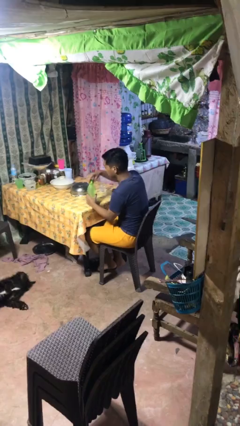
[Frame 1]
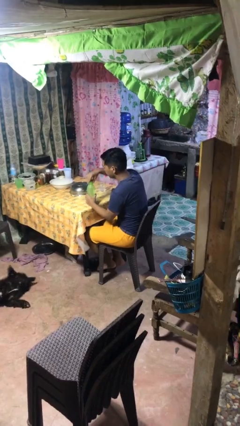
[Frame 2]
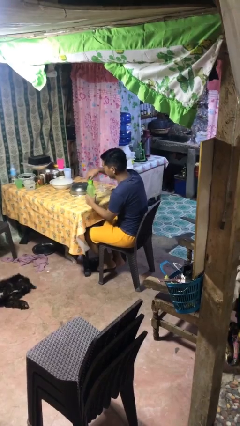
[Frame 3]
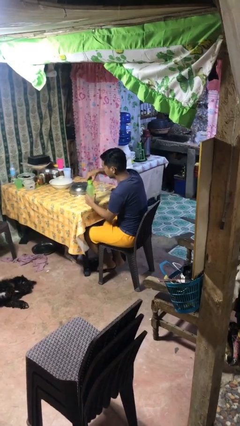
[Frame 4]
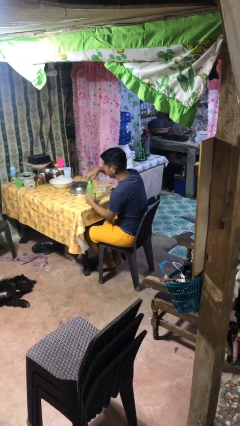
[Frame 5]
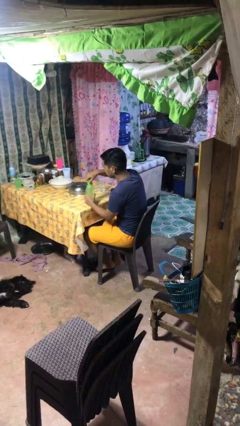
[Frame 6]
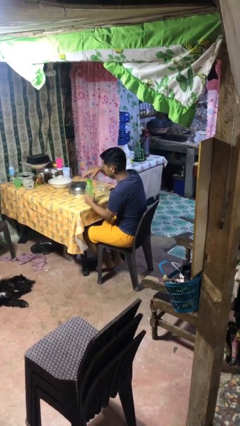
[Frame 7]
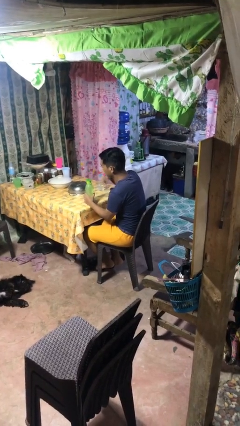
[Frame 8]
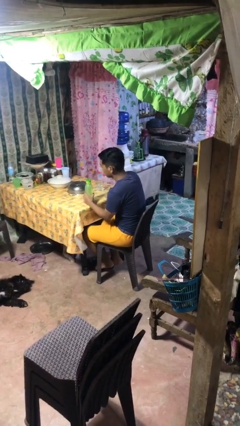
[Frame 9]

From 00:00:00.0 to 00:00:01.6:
person screws lid to bottle

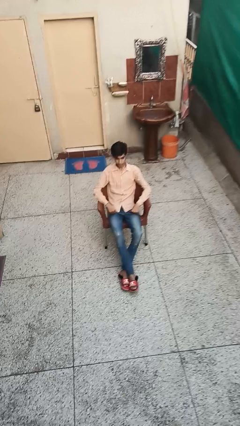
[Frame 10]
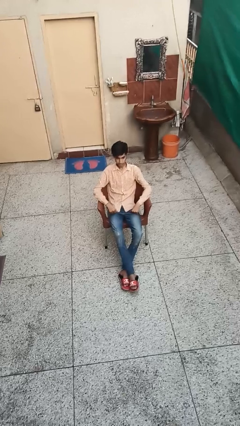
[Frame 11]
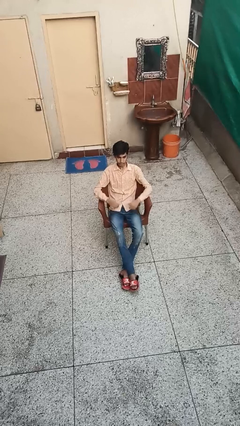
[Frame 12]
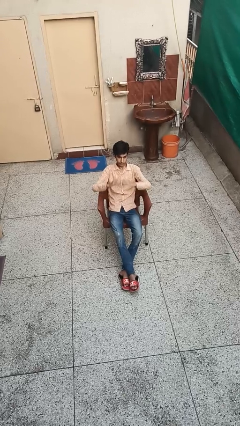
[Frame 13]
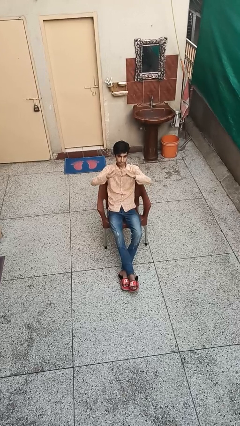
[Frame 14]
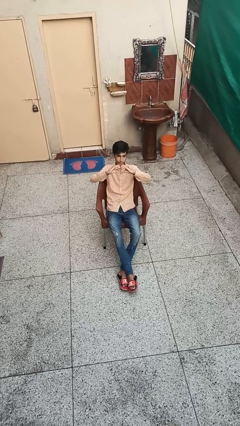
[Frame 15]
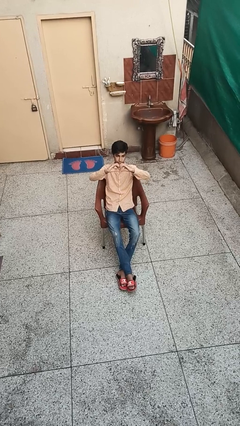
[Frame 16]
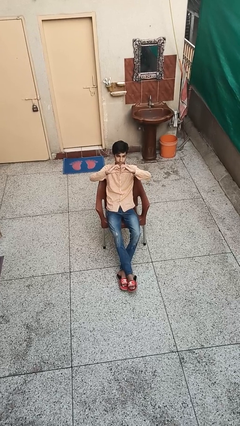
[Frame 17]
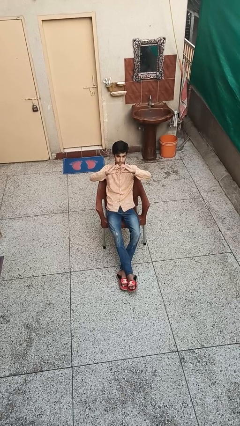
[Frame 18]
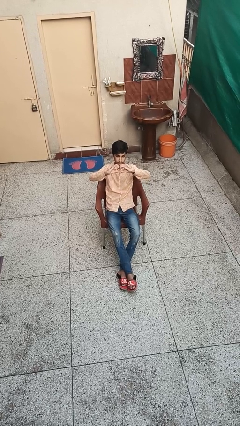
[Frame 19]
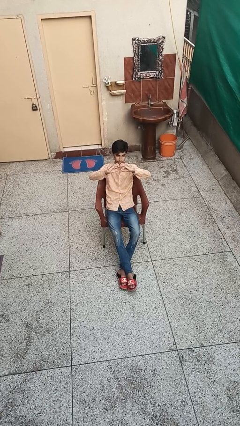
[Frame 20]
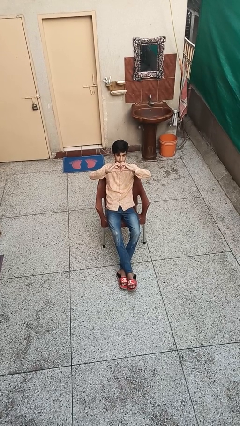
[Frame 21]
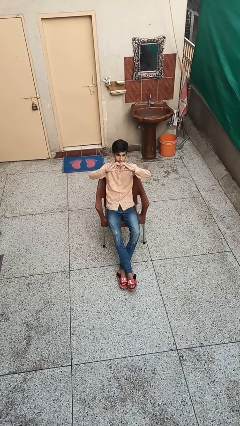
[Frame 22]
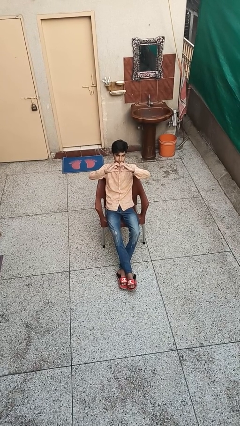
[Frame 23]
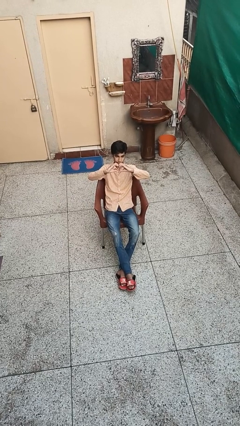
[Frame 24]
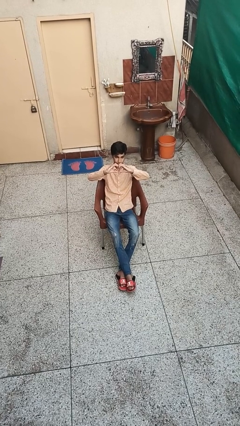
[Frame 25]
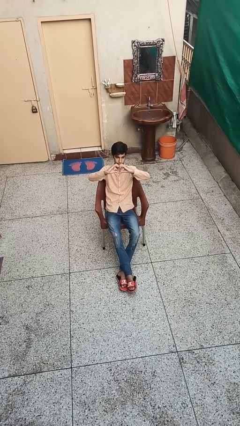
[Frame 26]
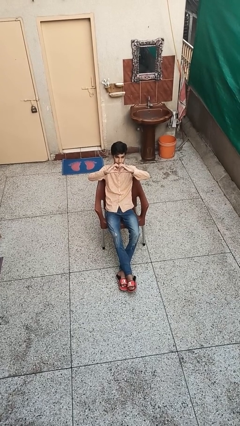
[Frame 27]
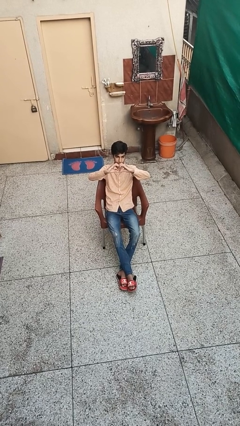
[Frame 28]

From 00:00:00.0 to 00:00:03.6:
person gestures heart

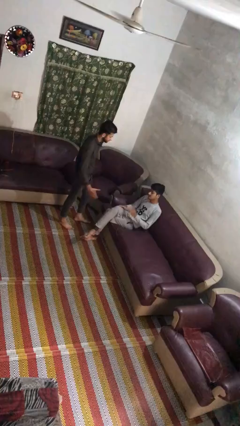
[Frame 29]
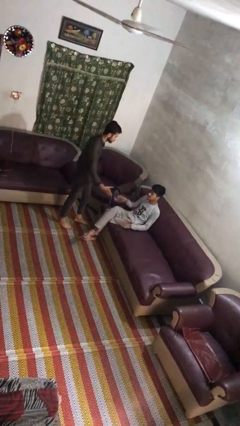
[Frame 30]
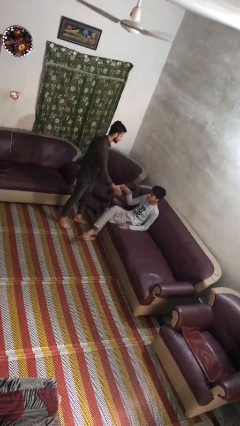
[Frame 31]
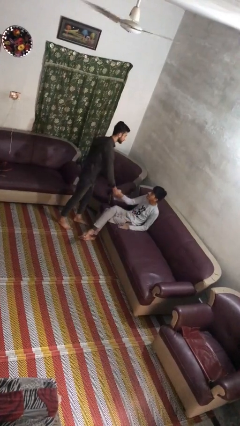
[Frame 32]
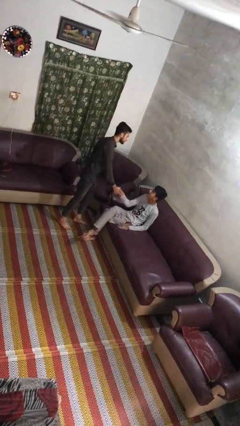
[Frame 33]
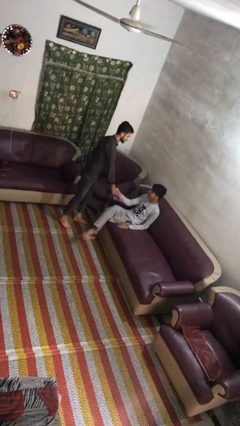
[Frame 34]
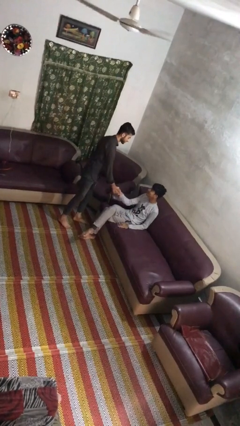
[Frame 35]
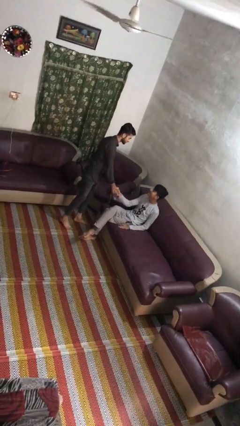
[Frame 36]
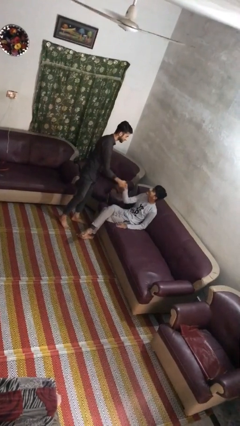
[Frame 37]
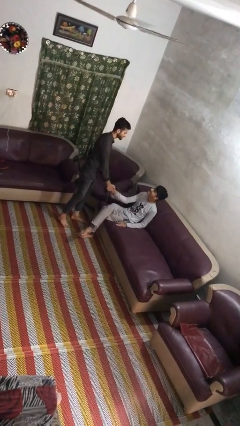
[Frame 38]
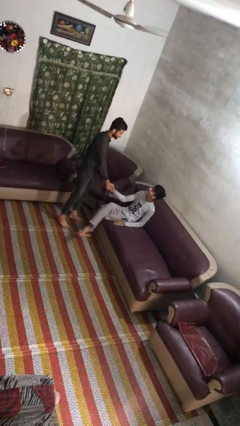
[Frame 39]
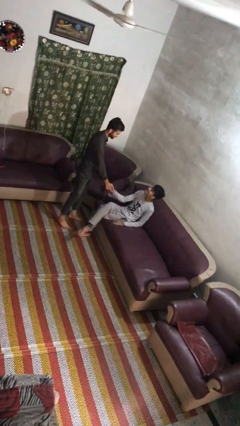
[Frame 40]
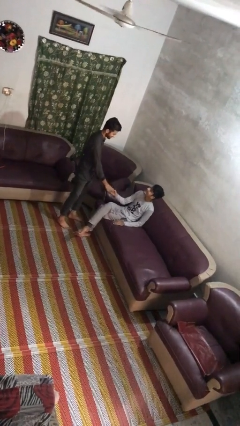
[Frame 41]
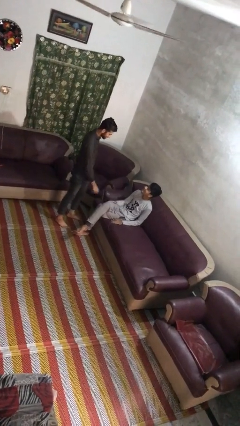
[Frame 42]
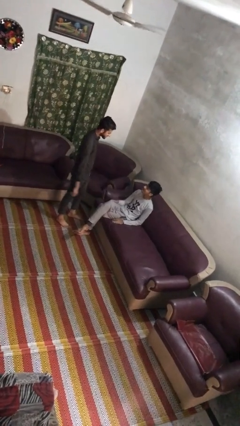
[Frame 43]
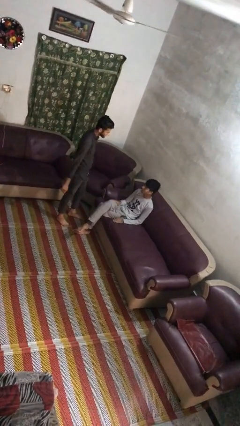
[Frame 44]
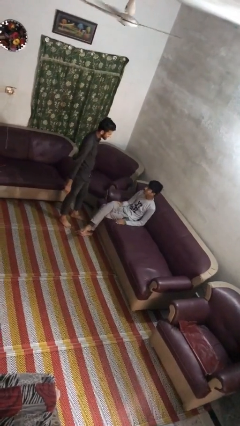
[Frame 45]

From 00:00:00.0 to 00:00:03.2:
person shakes hand

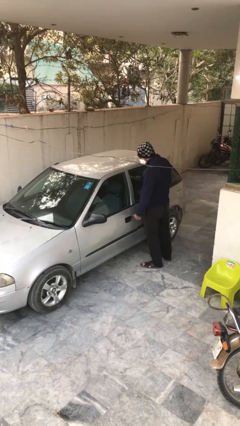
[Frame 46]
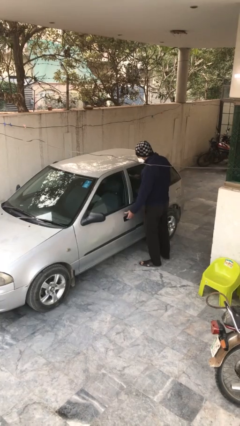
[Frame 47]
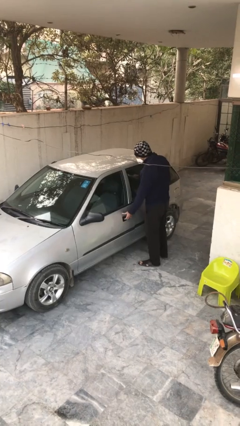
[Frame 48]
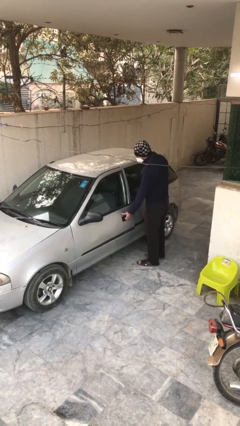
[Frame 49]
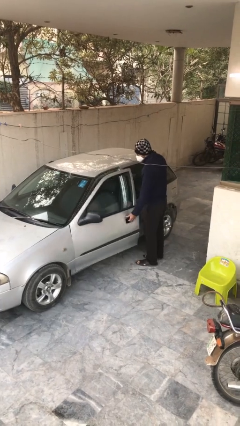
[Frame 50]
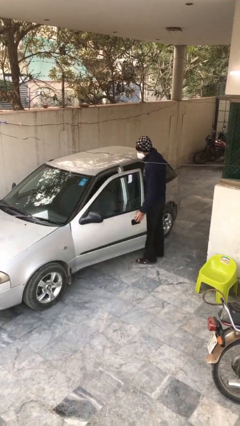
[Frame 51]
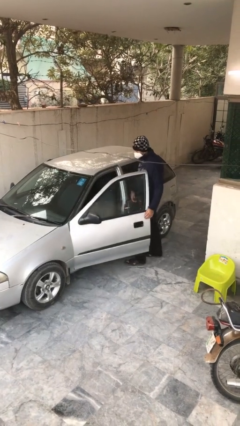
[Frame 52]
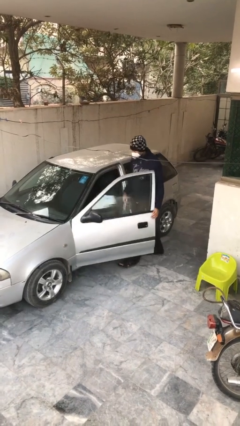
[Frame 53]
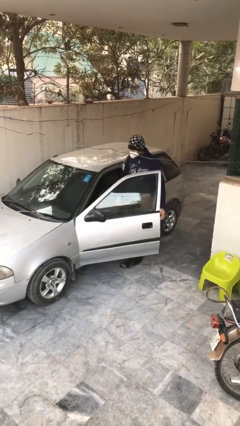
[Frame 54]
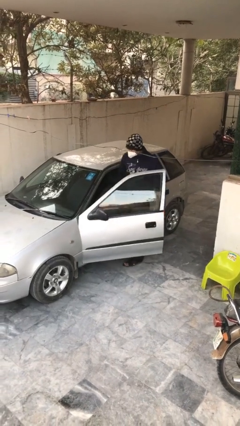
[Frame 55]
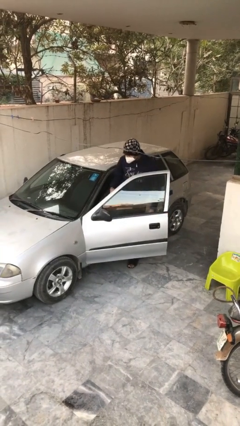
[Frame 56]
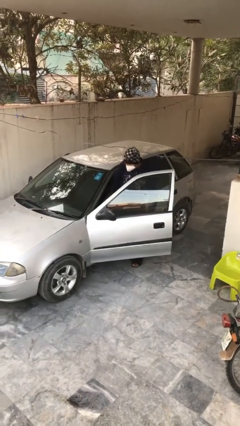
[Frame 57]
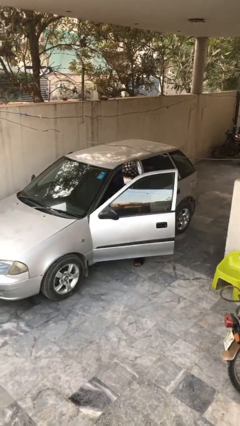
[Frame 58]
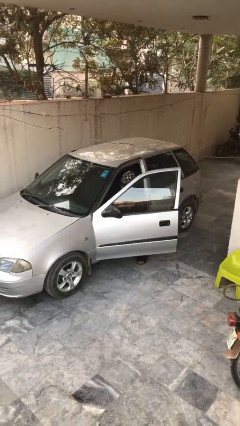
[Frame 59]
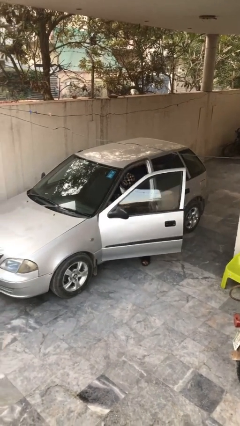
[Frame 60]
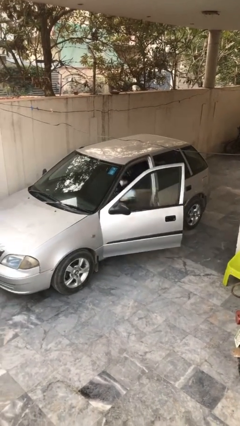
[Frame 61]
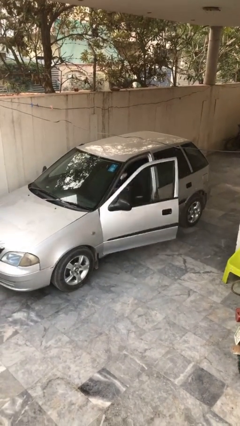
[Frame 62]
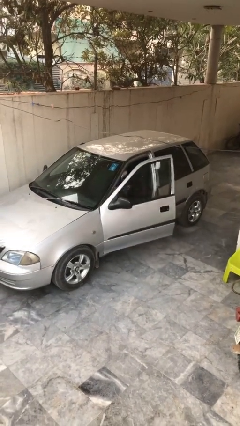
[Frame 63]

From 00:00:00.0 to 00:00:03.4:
car picks up person

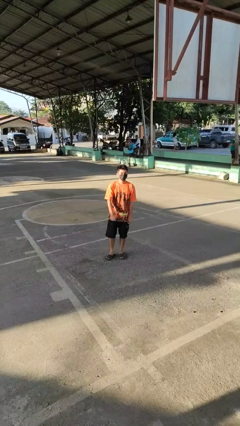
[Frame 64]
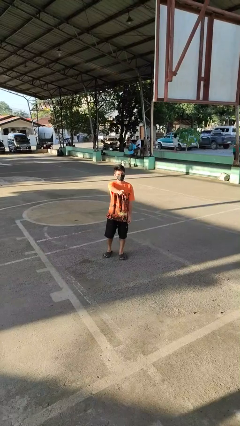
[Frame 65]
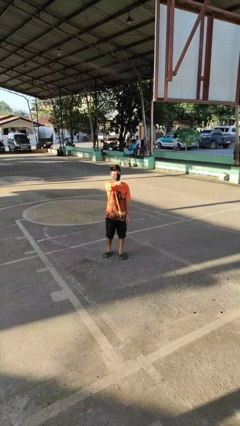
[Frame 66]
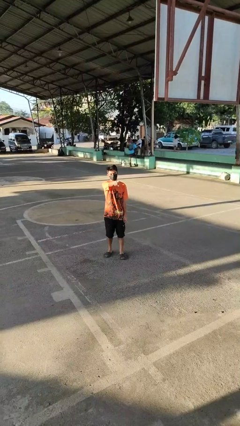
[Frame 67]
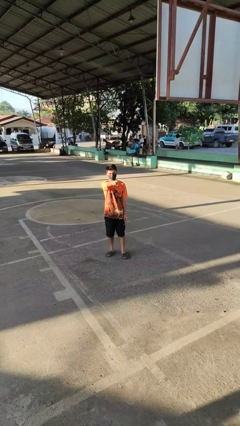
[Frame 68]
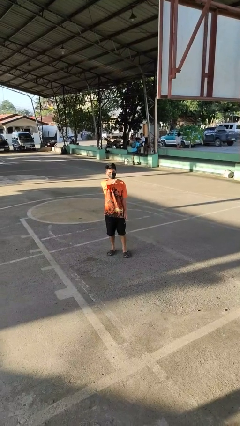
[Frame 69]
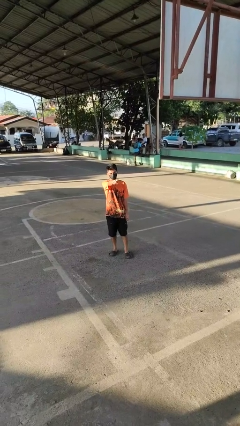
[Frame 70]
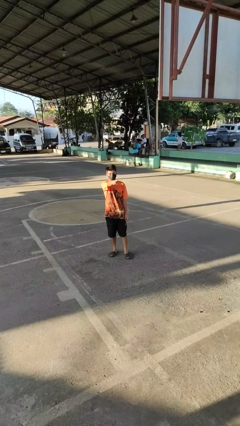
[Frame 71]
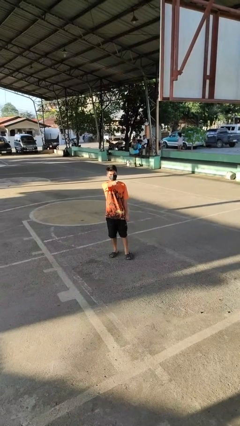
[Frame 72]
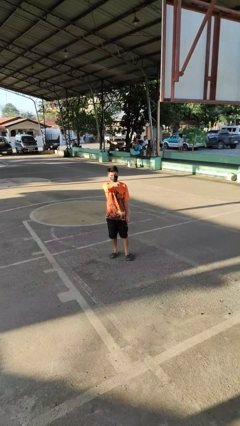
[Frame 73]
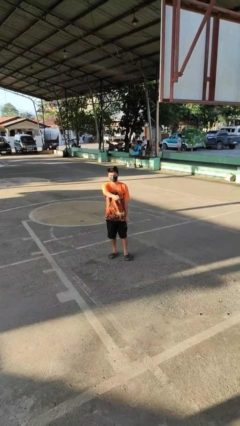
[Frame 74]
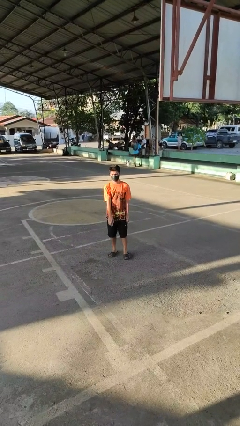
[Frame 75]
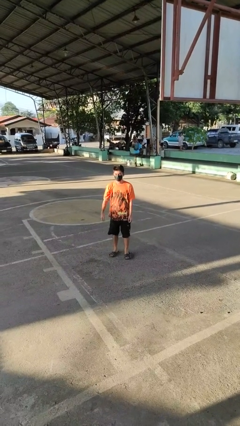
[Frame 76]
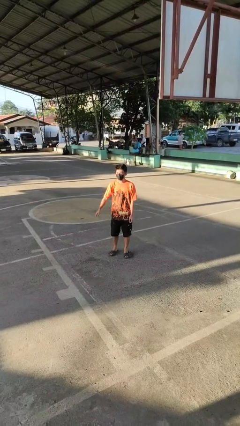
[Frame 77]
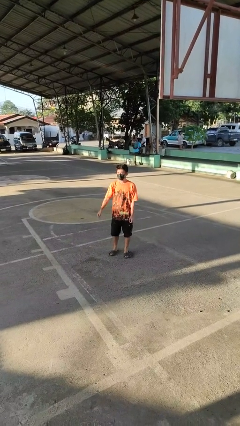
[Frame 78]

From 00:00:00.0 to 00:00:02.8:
person points at person

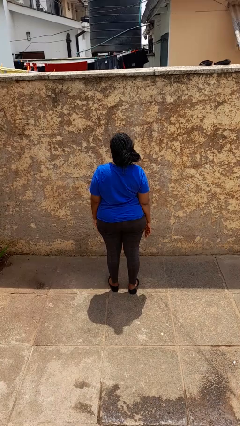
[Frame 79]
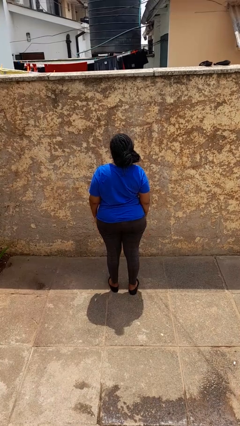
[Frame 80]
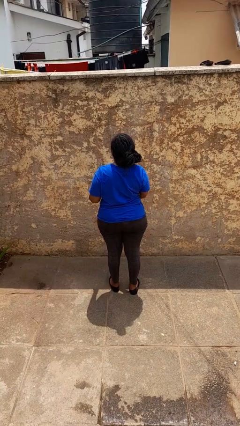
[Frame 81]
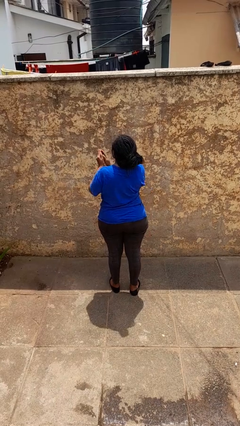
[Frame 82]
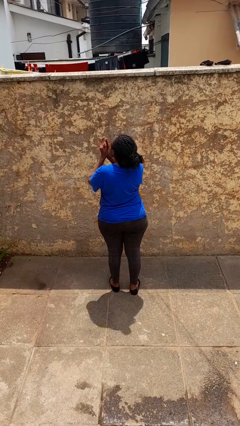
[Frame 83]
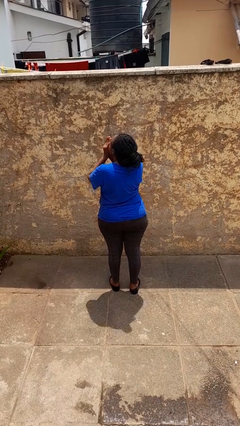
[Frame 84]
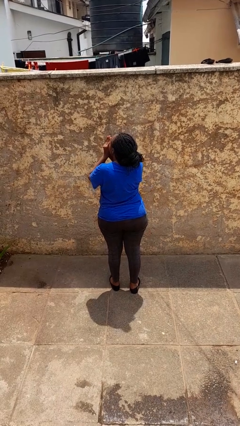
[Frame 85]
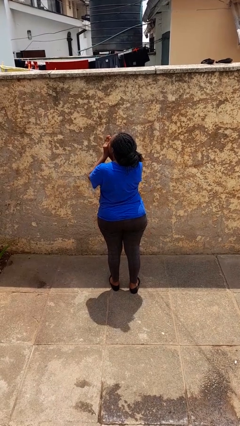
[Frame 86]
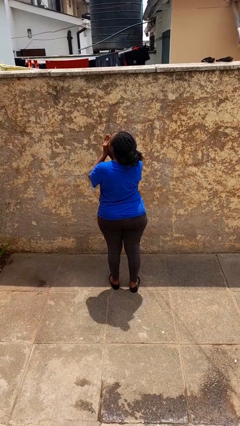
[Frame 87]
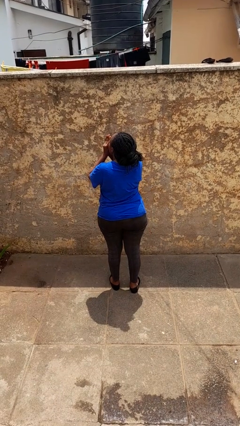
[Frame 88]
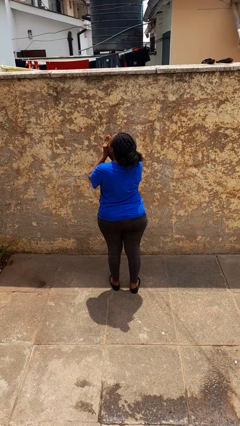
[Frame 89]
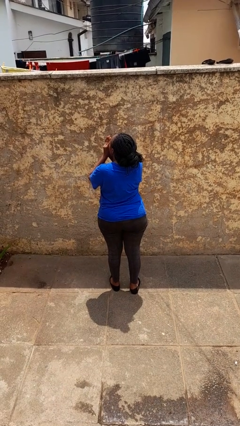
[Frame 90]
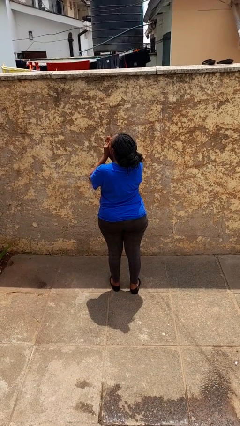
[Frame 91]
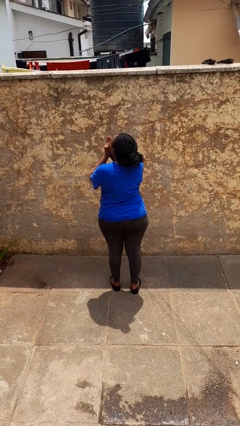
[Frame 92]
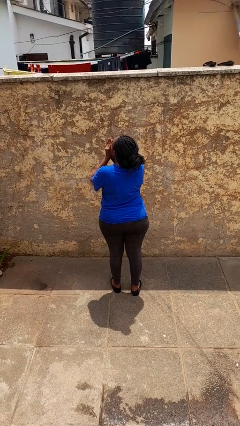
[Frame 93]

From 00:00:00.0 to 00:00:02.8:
person blows into hands

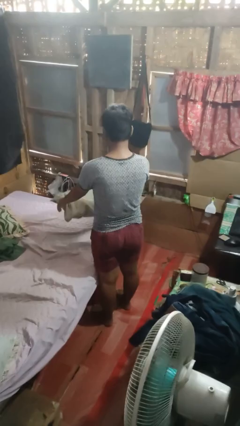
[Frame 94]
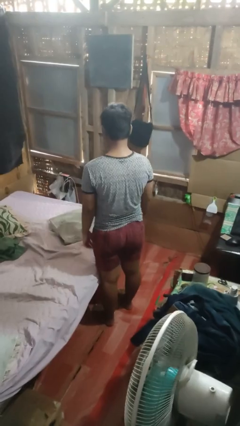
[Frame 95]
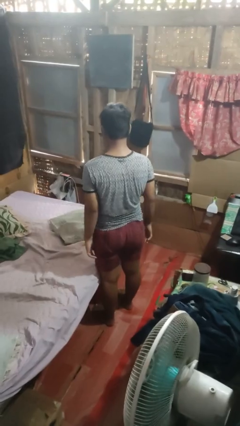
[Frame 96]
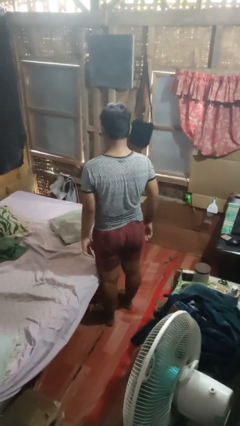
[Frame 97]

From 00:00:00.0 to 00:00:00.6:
person puts down object on bed
